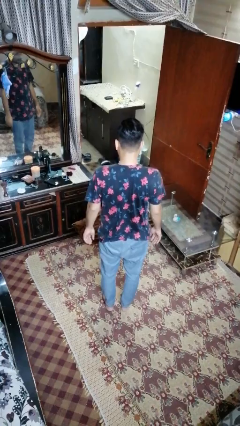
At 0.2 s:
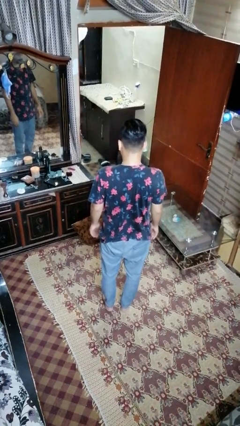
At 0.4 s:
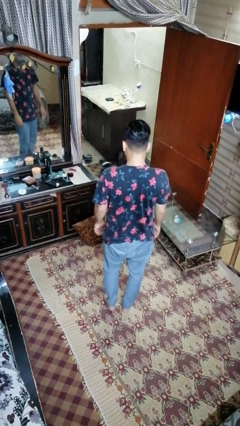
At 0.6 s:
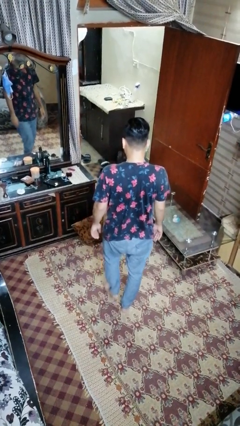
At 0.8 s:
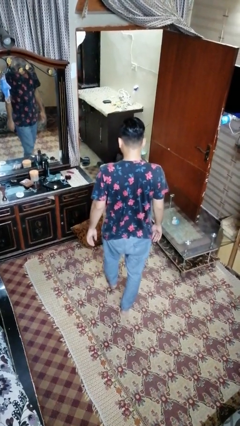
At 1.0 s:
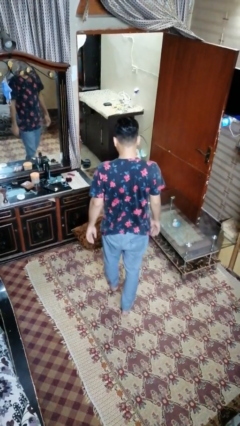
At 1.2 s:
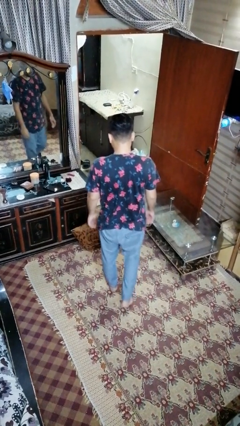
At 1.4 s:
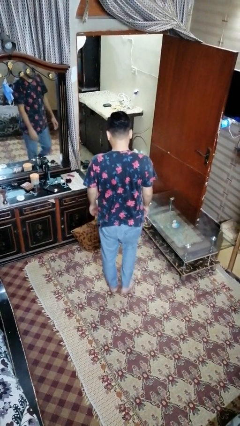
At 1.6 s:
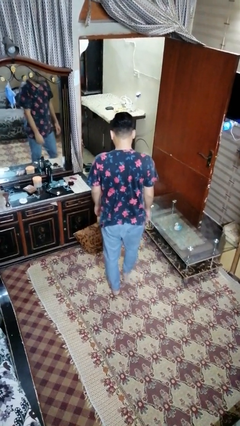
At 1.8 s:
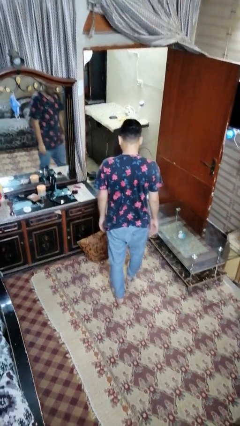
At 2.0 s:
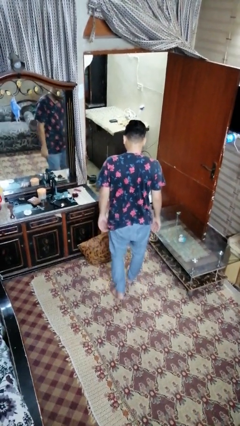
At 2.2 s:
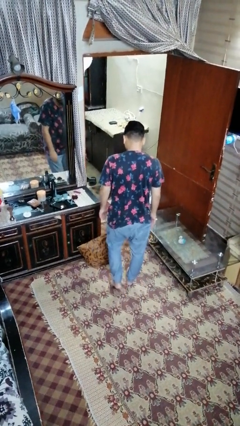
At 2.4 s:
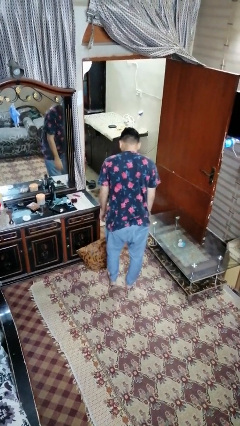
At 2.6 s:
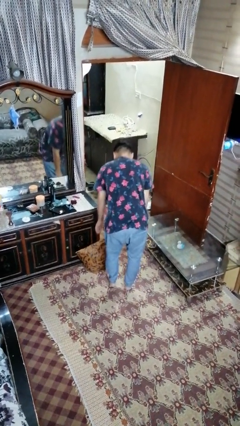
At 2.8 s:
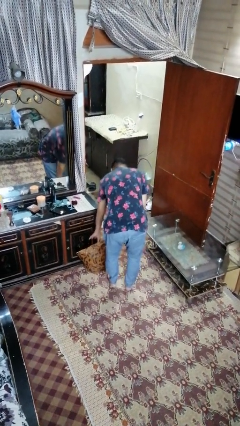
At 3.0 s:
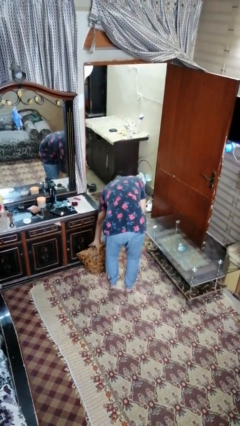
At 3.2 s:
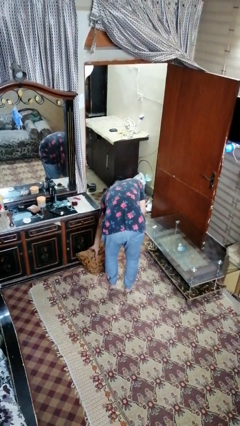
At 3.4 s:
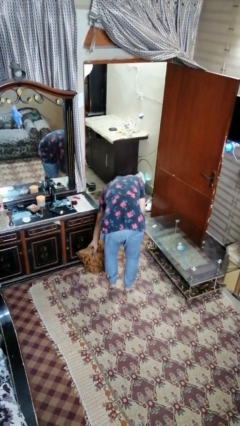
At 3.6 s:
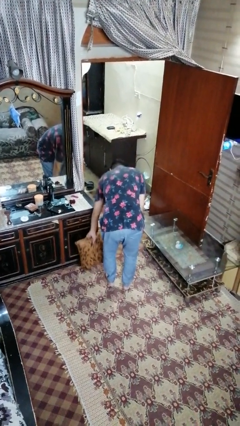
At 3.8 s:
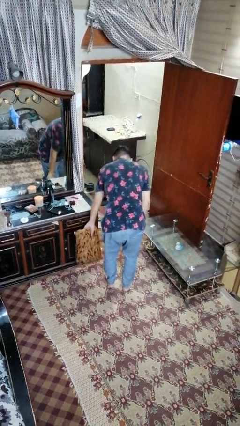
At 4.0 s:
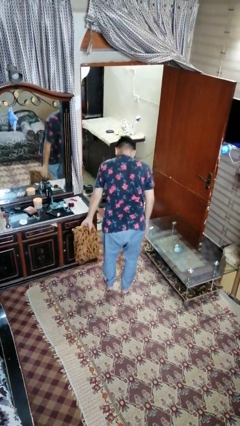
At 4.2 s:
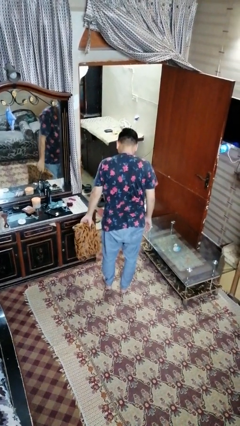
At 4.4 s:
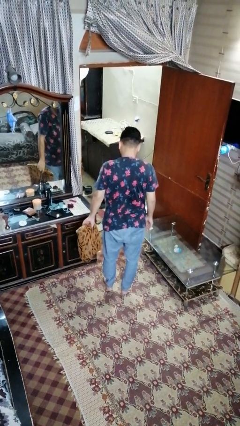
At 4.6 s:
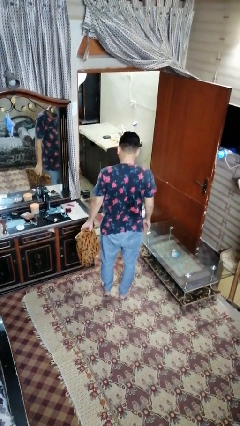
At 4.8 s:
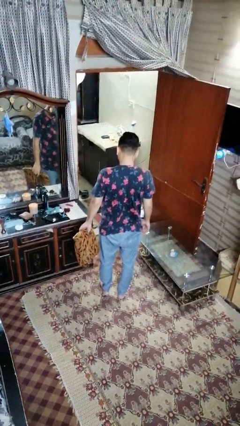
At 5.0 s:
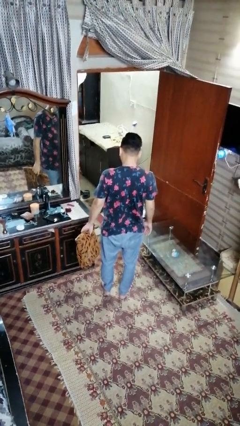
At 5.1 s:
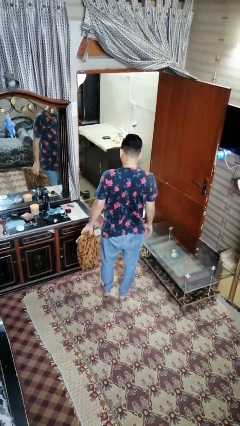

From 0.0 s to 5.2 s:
person picks up object from floor

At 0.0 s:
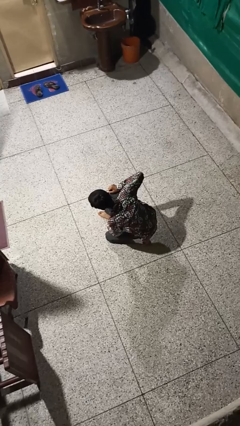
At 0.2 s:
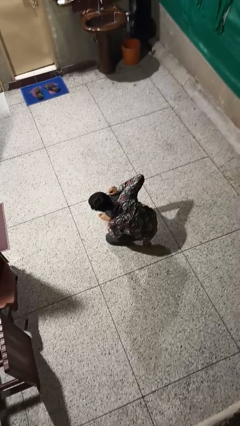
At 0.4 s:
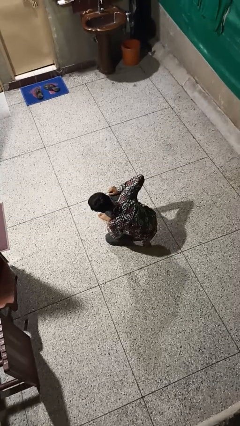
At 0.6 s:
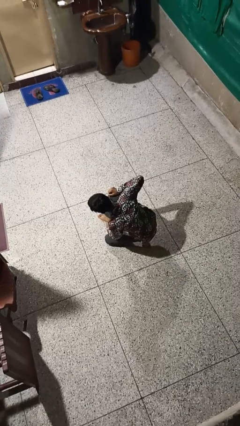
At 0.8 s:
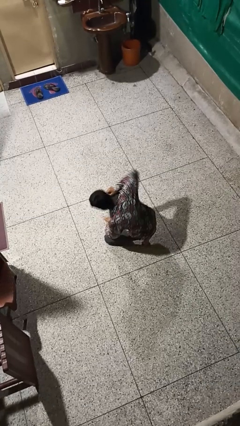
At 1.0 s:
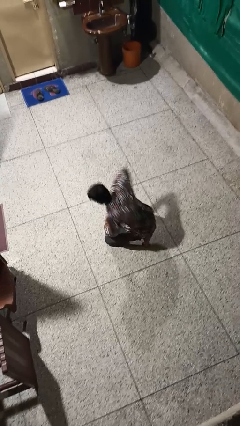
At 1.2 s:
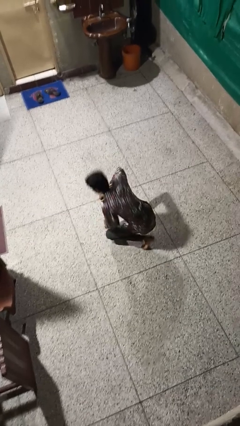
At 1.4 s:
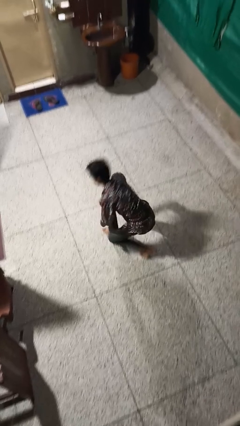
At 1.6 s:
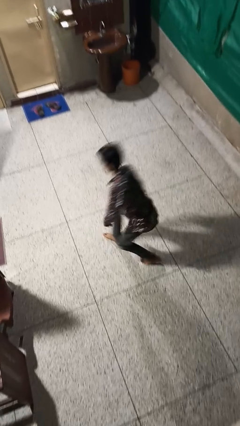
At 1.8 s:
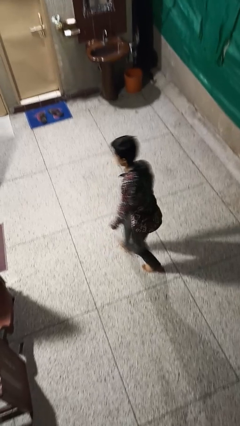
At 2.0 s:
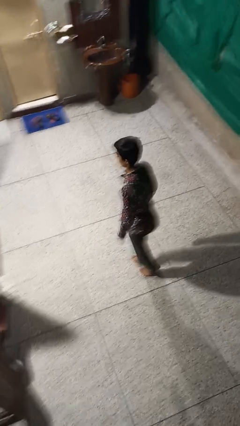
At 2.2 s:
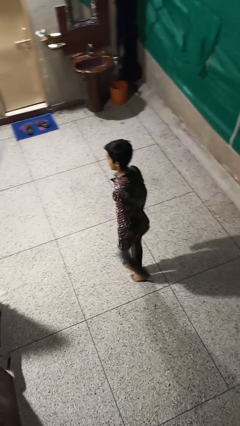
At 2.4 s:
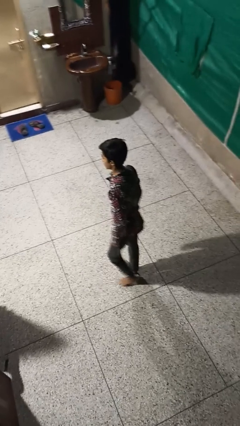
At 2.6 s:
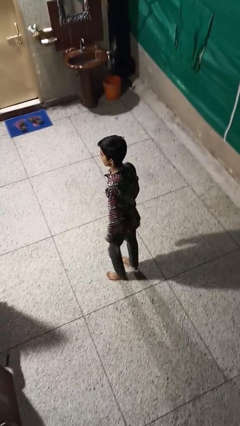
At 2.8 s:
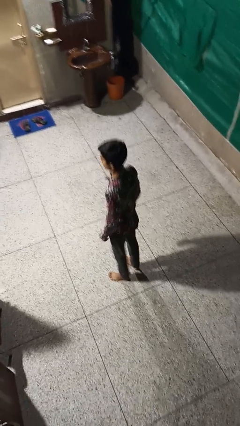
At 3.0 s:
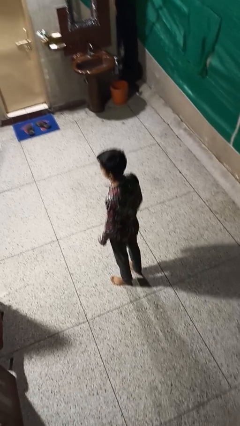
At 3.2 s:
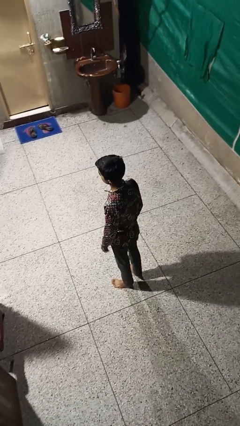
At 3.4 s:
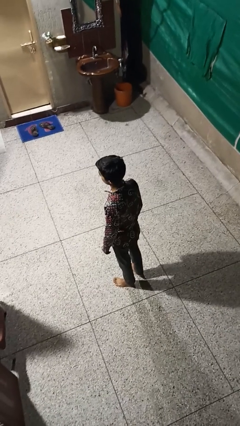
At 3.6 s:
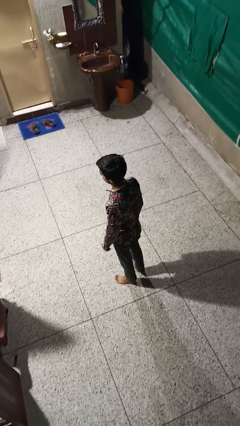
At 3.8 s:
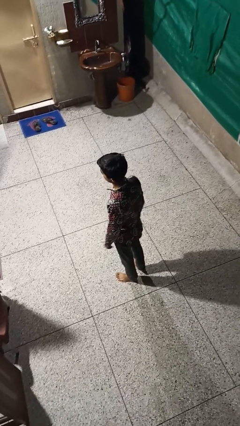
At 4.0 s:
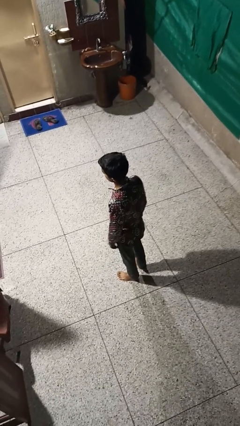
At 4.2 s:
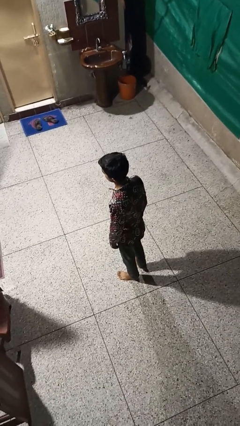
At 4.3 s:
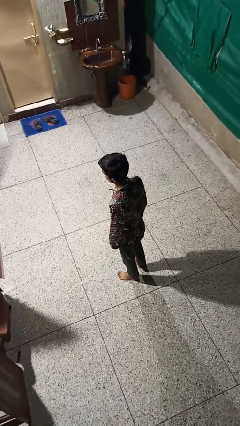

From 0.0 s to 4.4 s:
person stands up from floor

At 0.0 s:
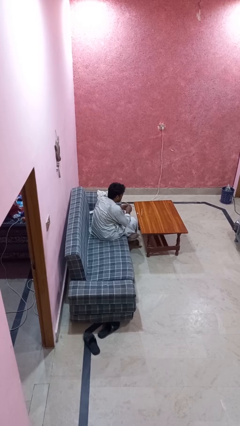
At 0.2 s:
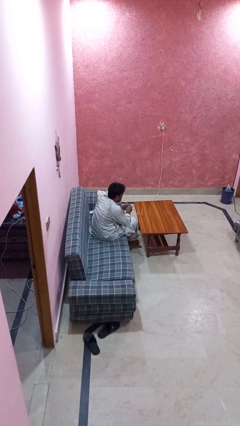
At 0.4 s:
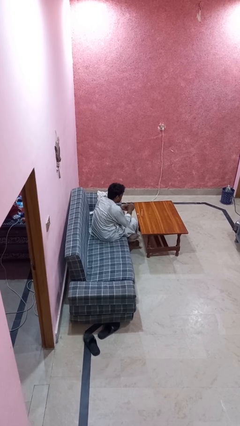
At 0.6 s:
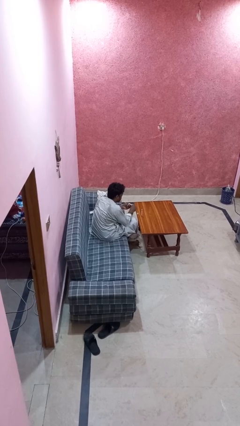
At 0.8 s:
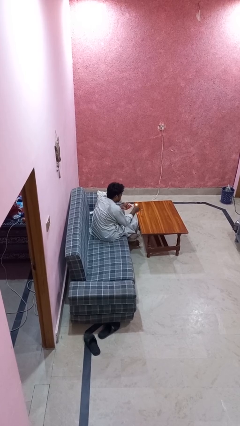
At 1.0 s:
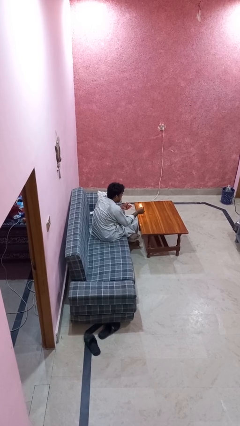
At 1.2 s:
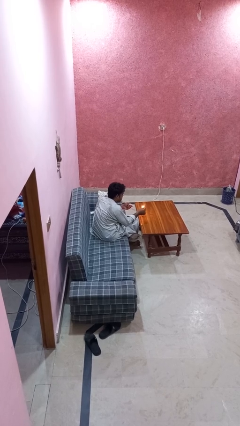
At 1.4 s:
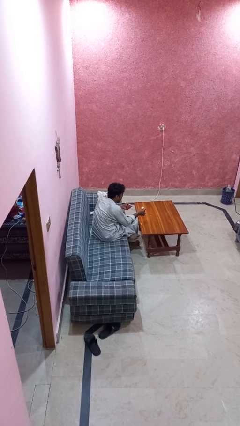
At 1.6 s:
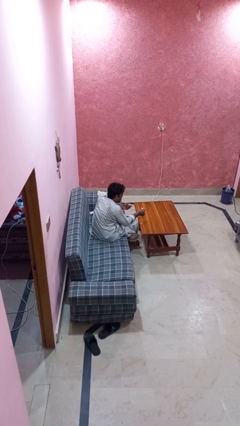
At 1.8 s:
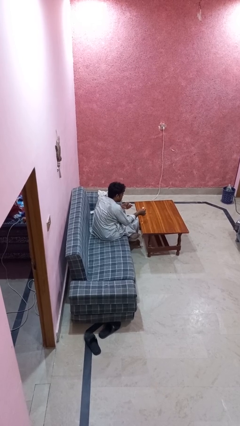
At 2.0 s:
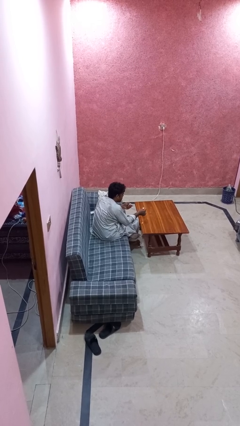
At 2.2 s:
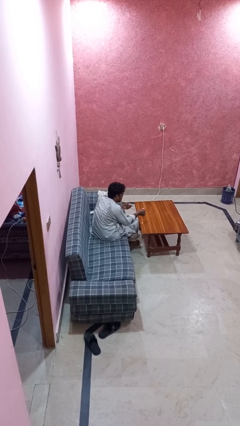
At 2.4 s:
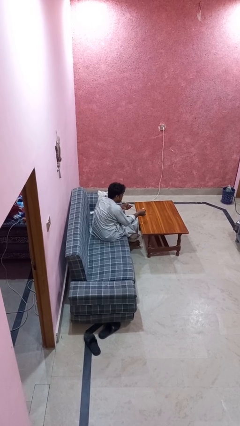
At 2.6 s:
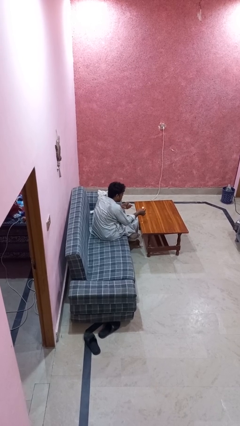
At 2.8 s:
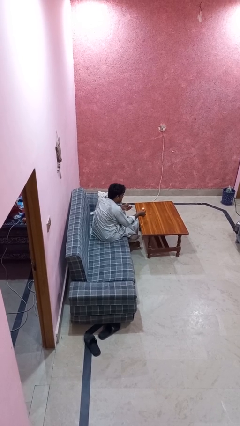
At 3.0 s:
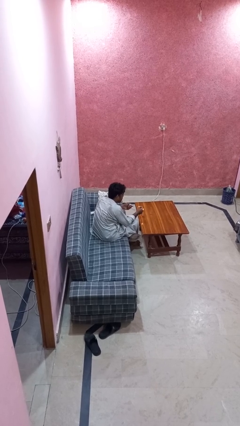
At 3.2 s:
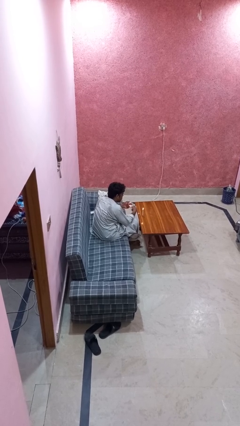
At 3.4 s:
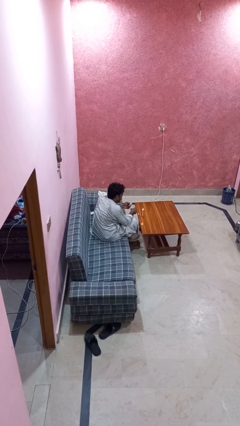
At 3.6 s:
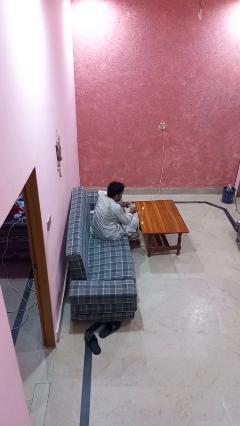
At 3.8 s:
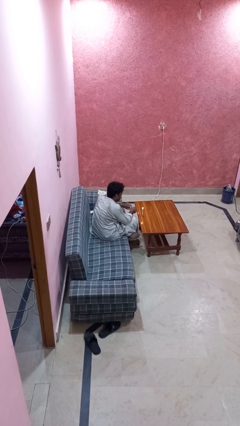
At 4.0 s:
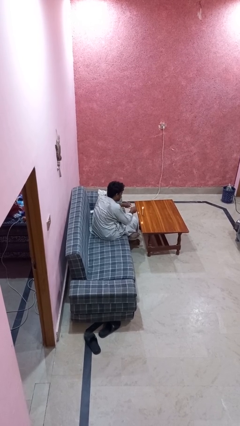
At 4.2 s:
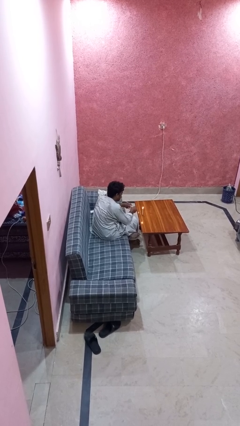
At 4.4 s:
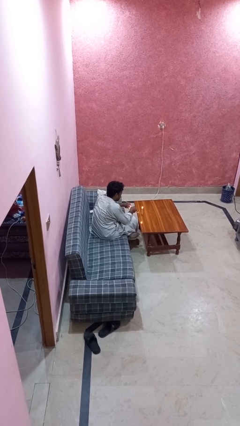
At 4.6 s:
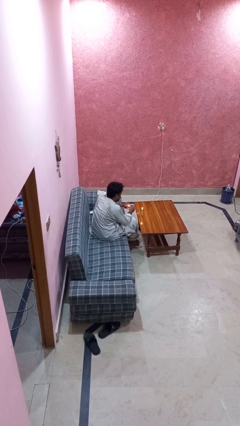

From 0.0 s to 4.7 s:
person lights candle

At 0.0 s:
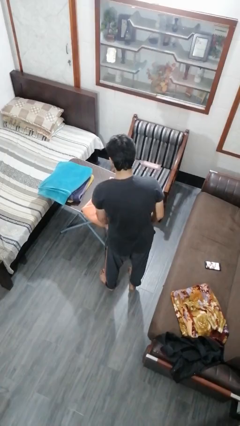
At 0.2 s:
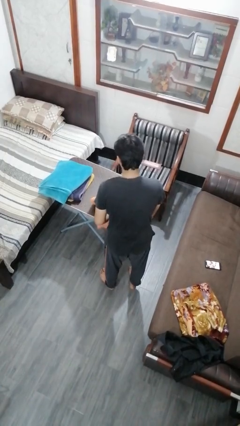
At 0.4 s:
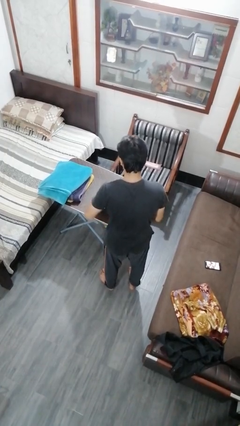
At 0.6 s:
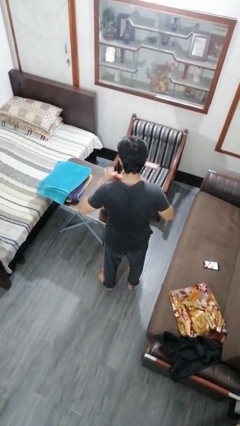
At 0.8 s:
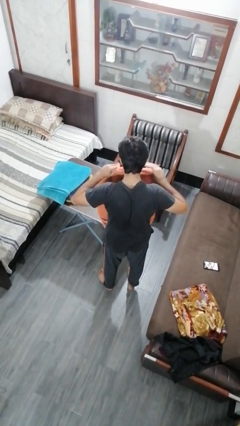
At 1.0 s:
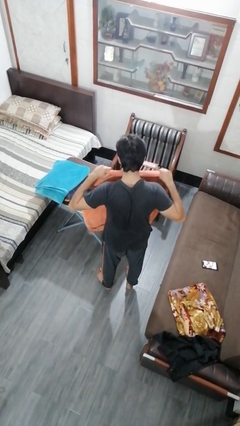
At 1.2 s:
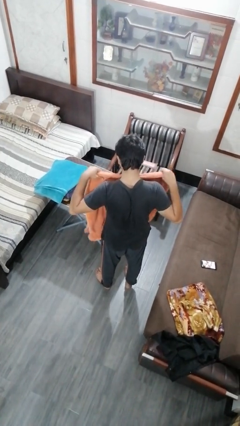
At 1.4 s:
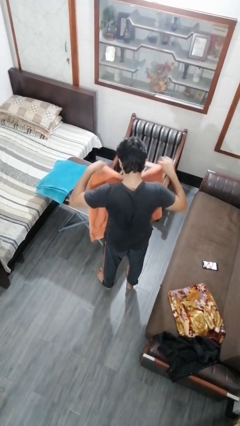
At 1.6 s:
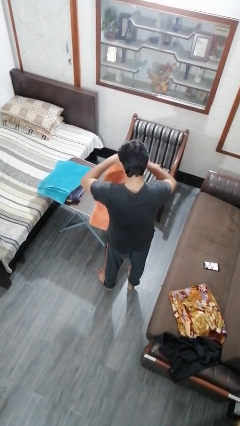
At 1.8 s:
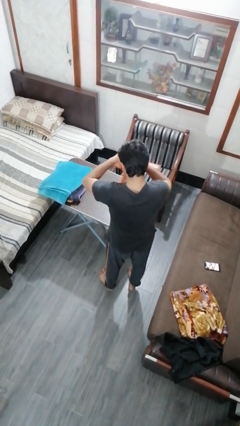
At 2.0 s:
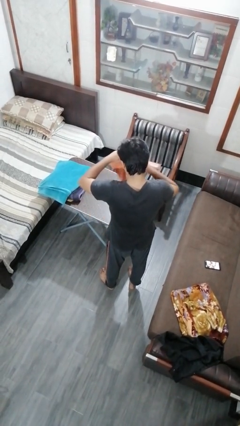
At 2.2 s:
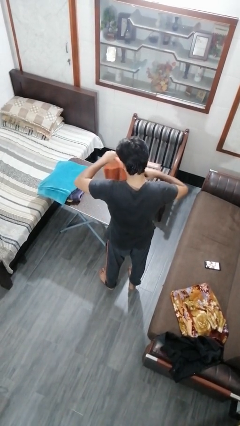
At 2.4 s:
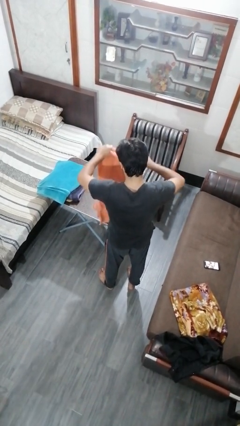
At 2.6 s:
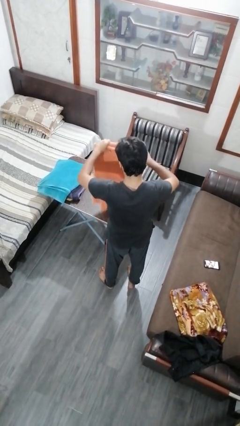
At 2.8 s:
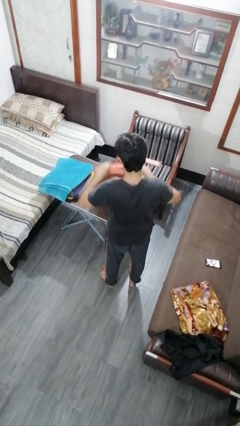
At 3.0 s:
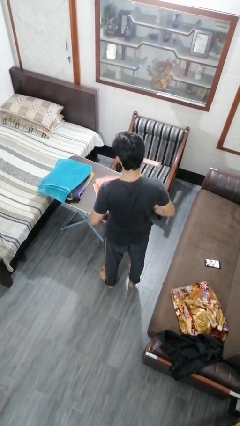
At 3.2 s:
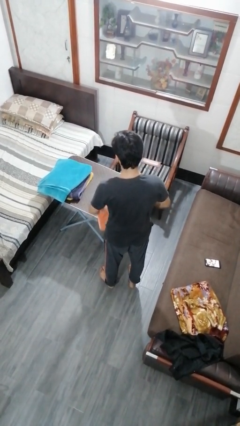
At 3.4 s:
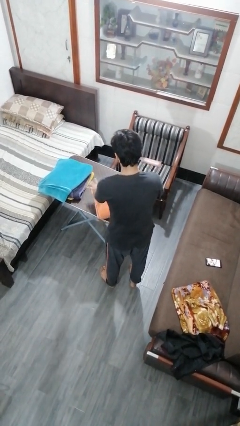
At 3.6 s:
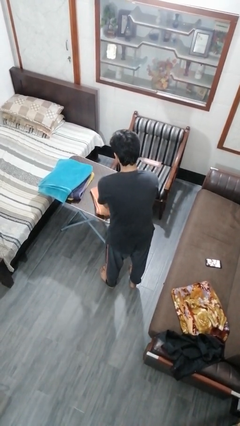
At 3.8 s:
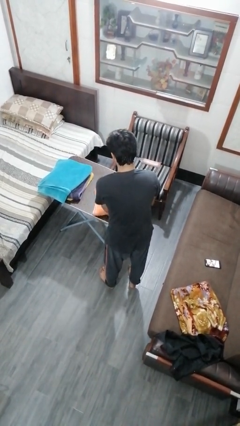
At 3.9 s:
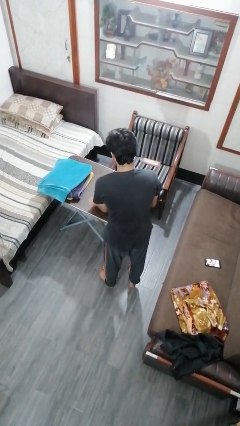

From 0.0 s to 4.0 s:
person folds towel
